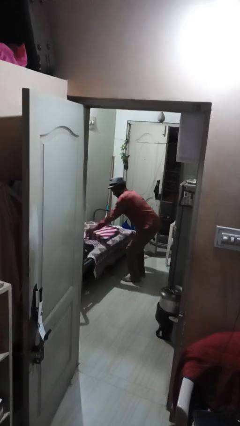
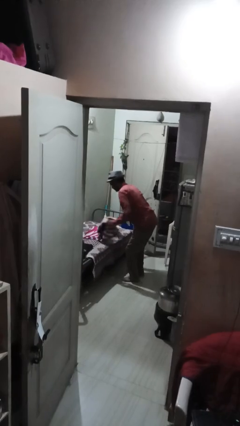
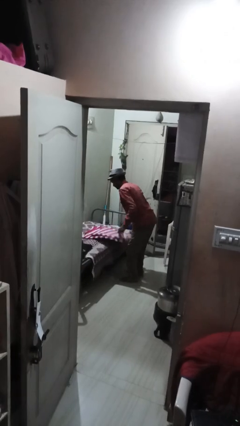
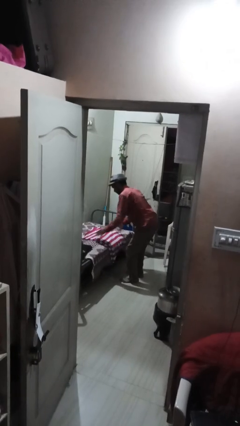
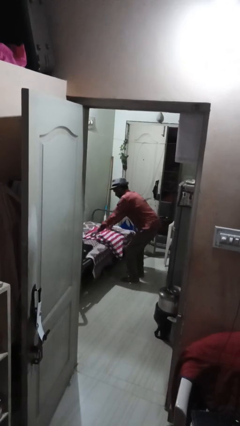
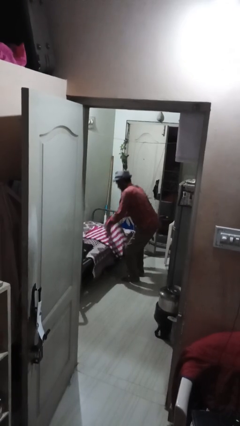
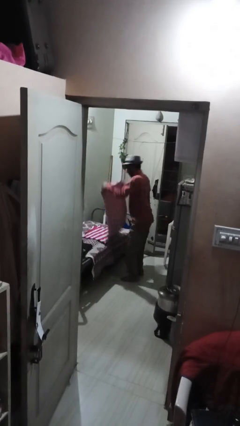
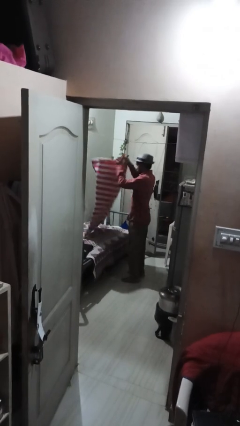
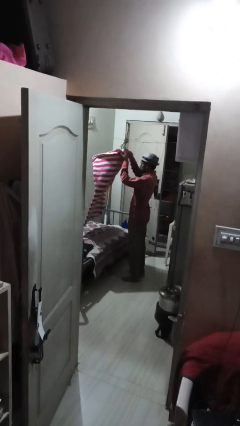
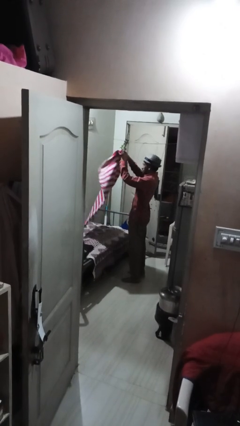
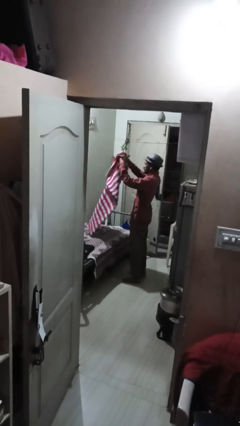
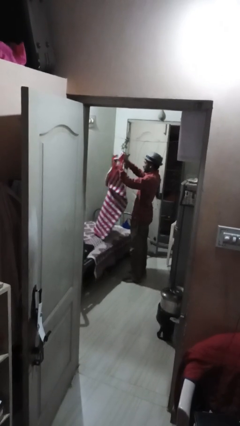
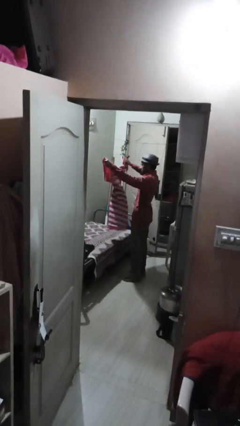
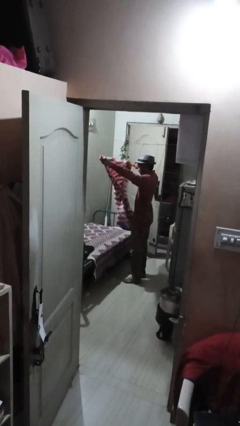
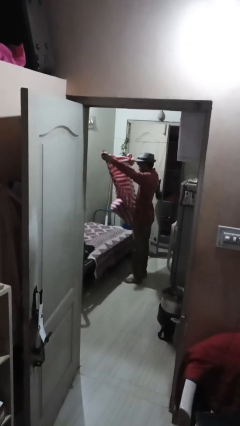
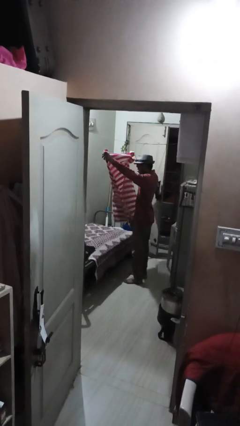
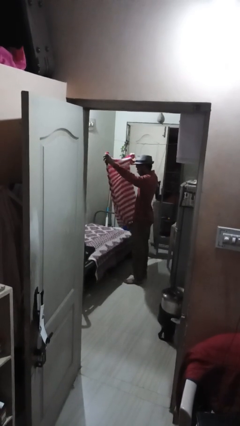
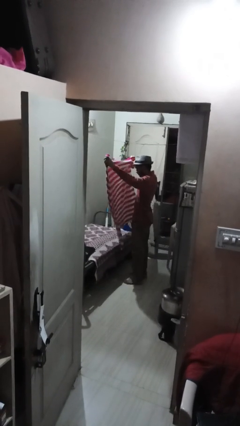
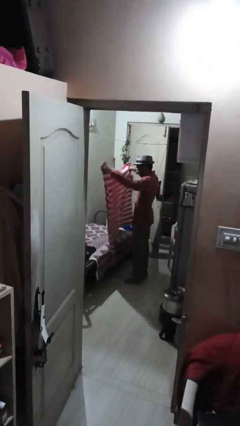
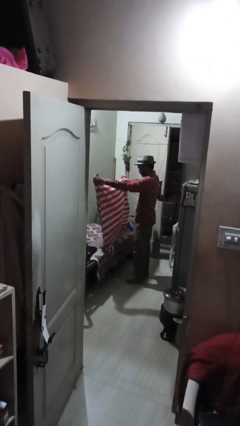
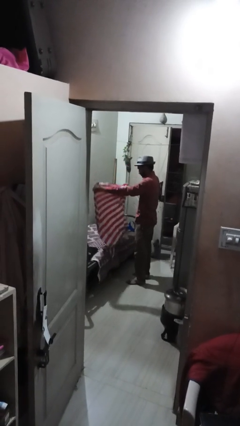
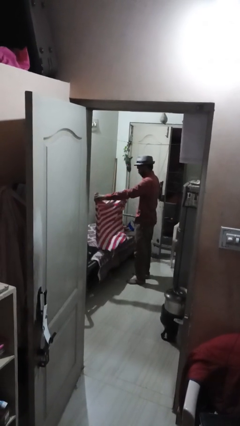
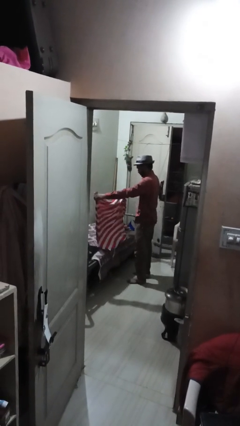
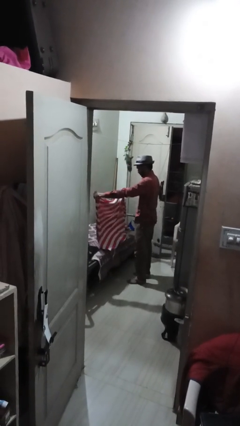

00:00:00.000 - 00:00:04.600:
person unfolds blanket

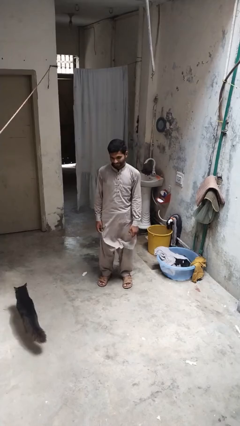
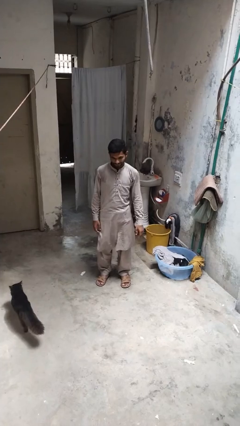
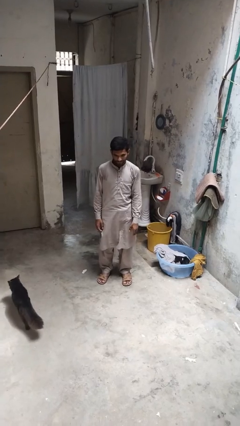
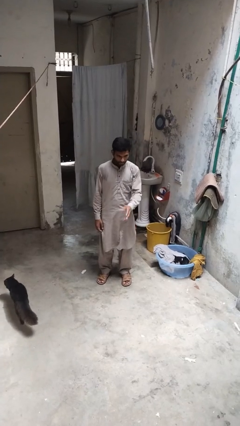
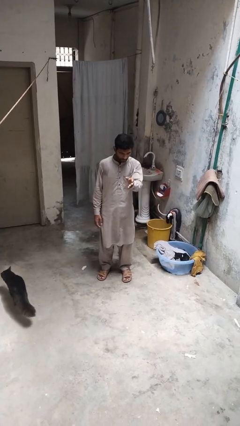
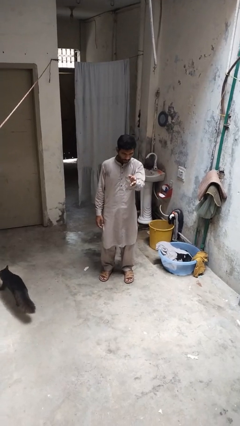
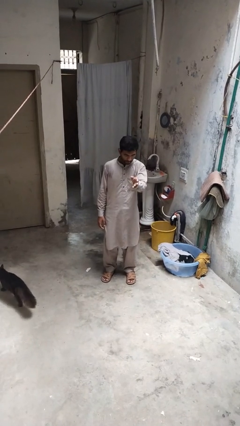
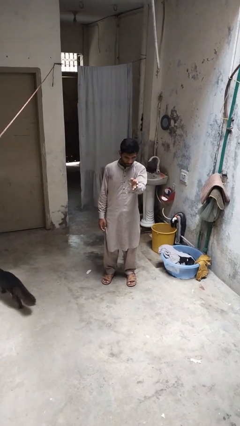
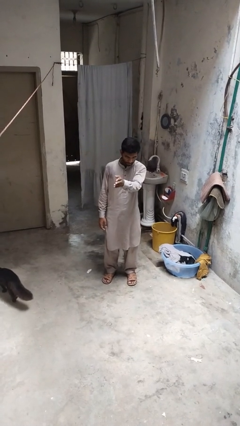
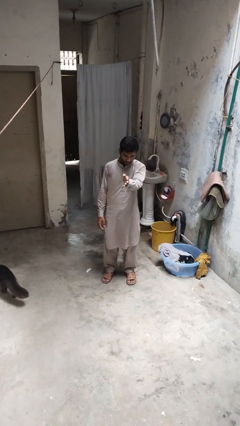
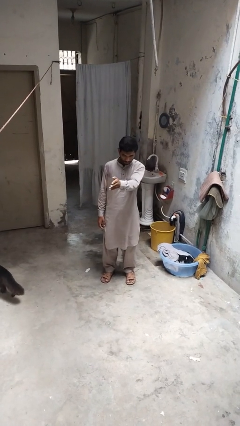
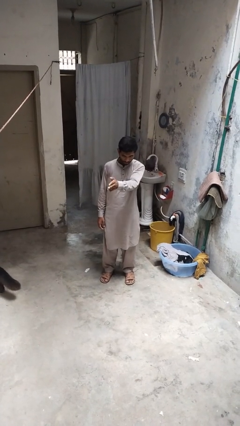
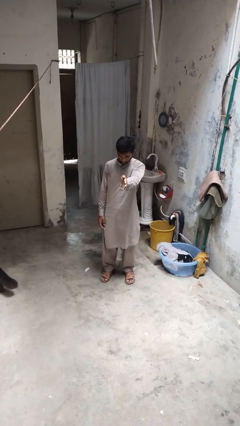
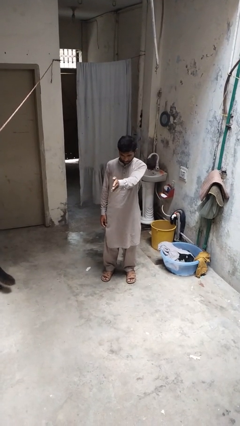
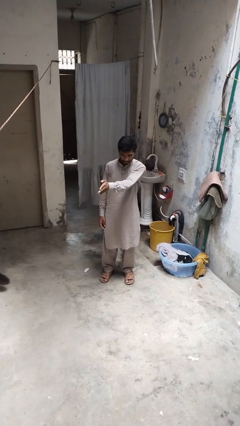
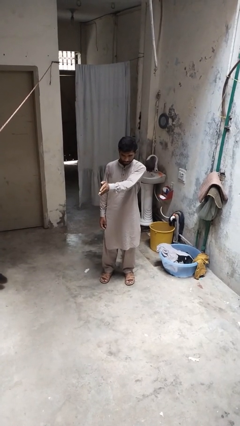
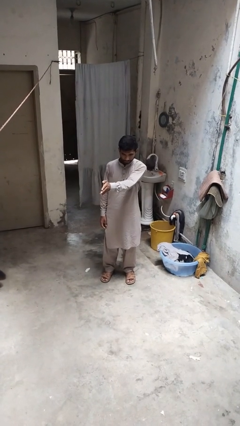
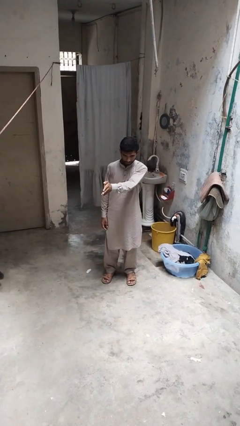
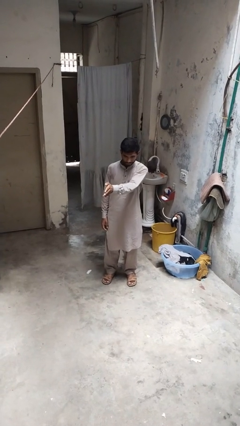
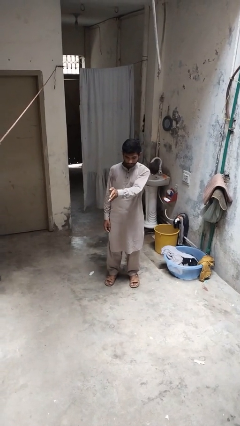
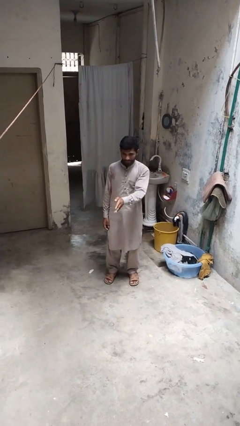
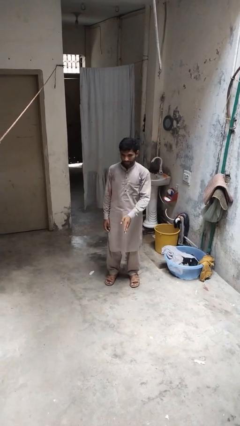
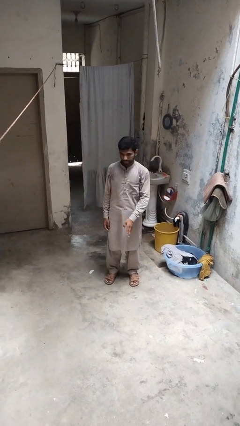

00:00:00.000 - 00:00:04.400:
person gestures swipe right

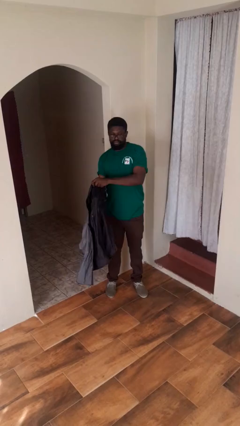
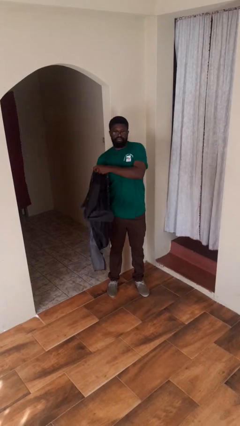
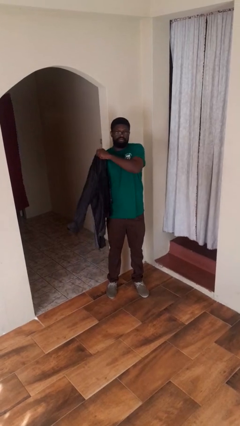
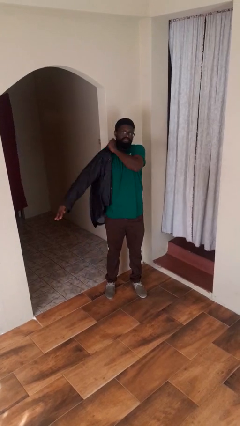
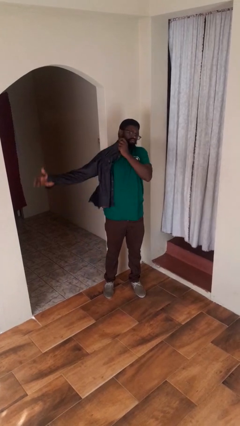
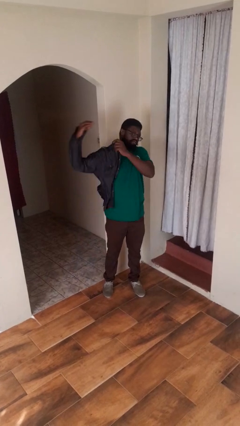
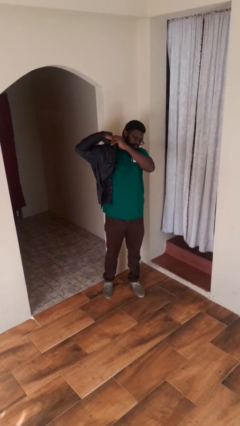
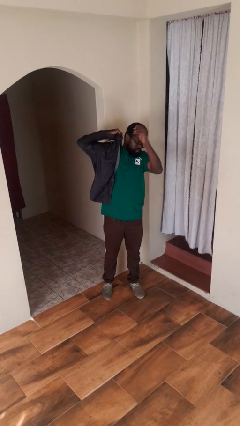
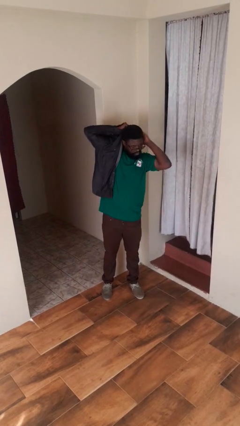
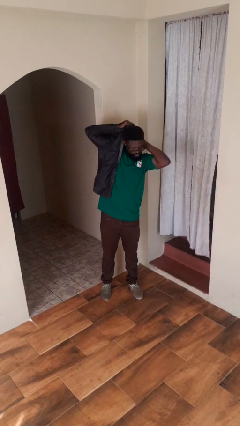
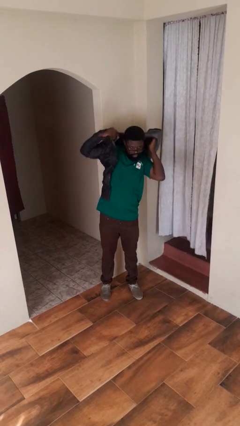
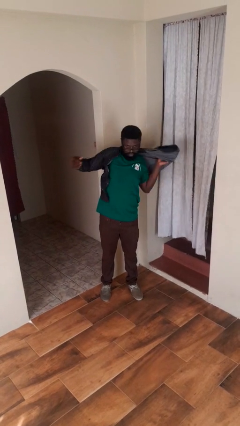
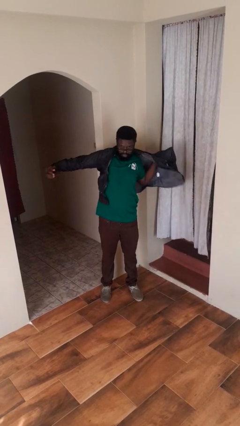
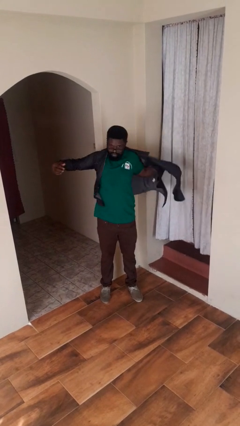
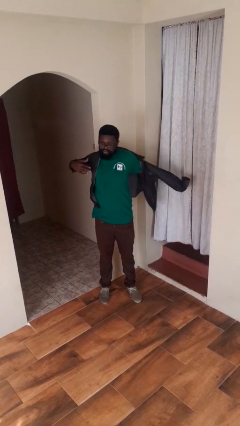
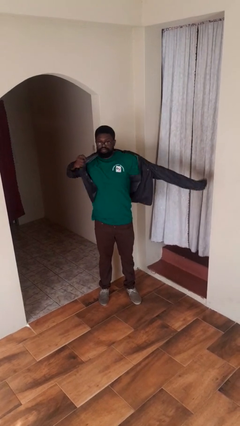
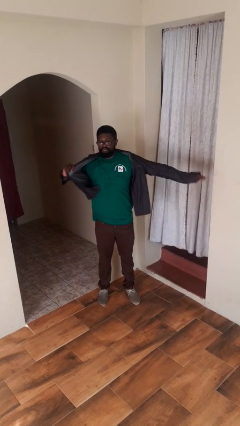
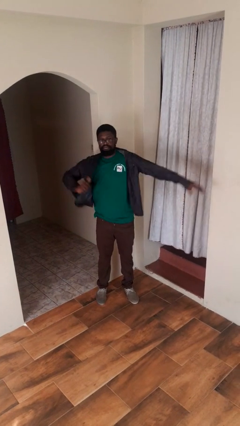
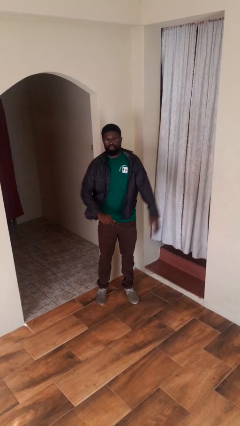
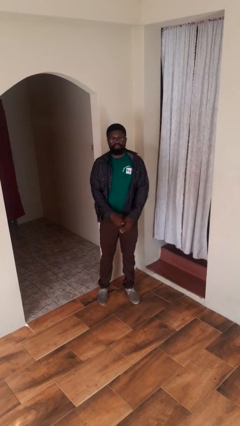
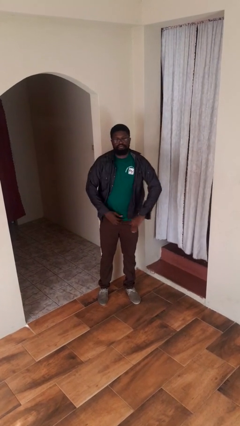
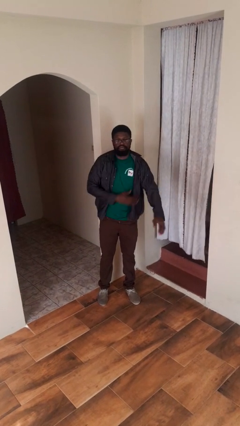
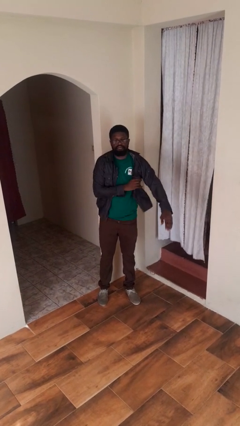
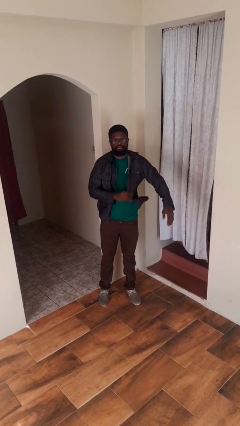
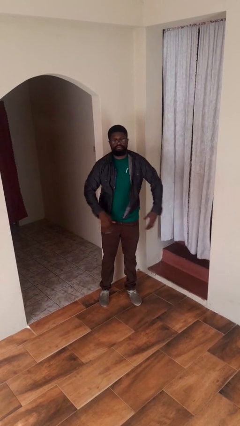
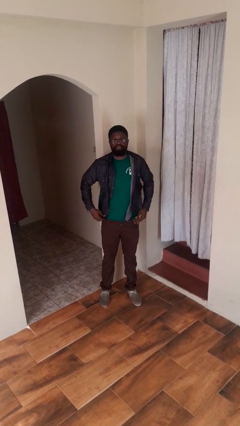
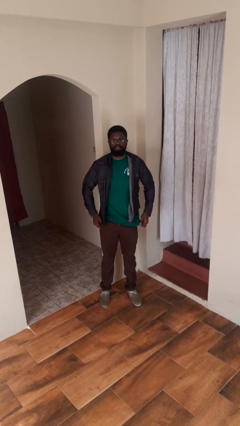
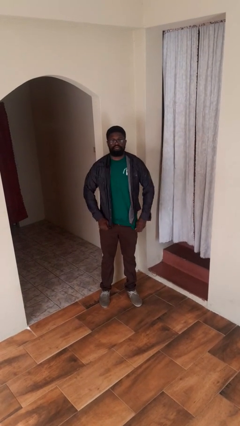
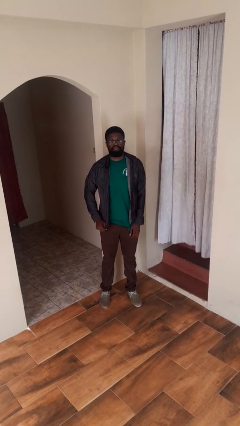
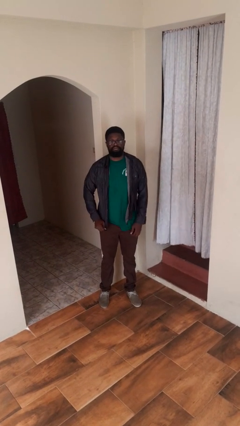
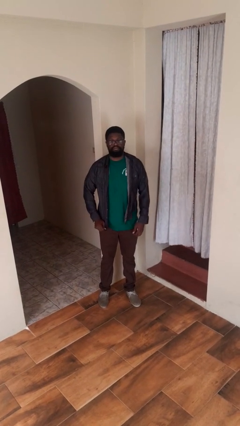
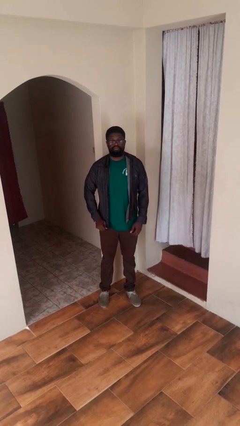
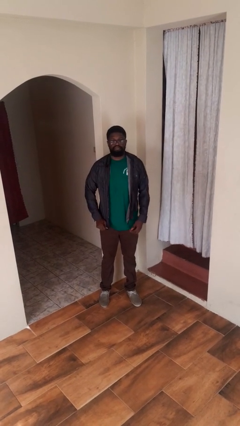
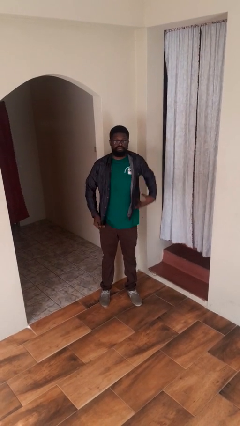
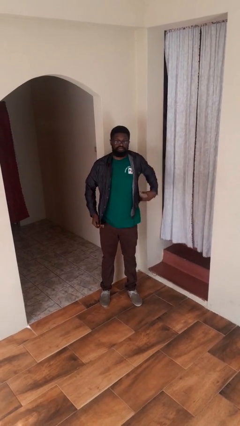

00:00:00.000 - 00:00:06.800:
person puts on shirt

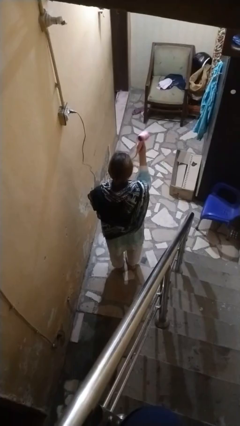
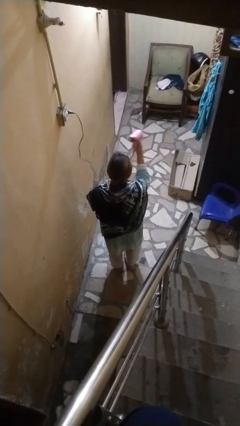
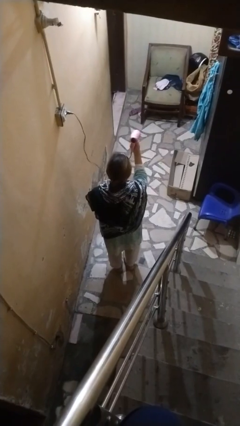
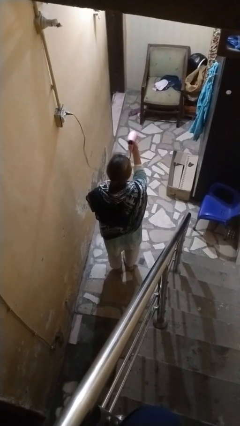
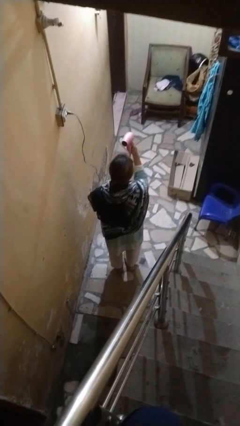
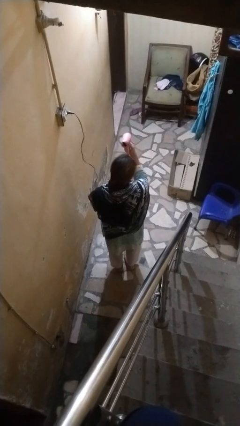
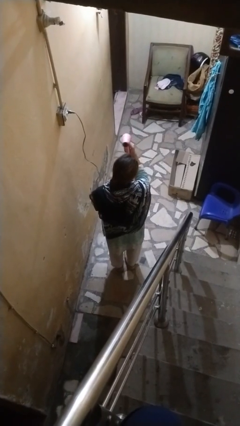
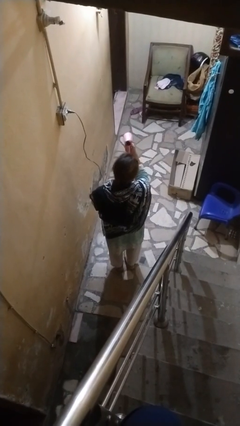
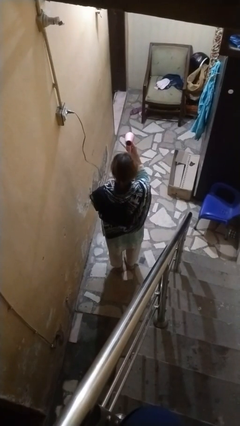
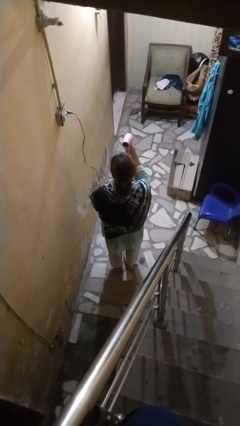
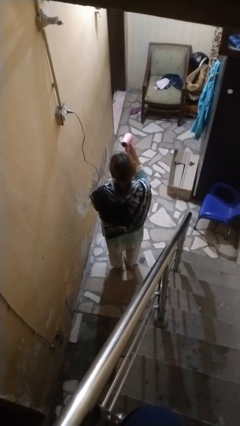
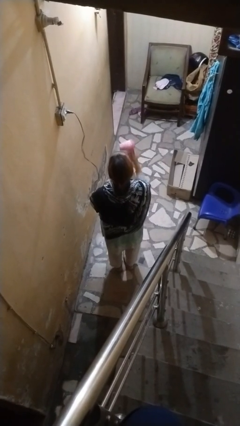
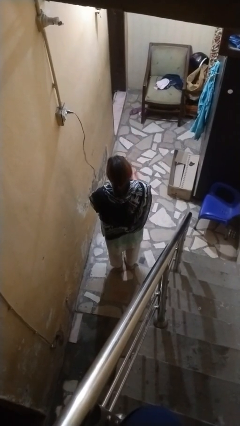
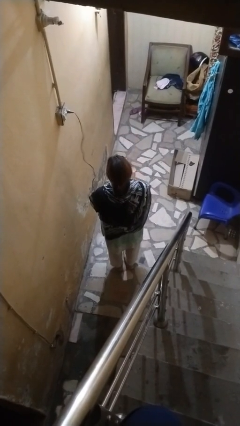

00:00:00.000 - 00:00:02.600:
person dries hair with hairdryer
